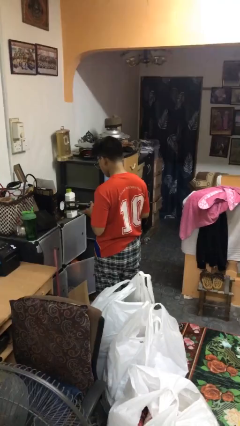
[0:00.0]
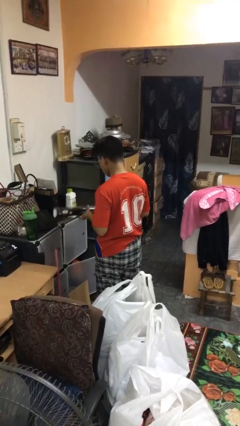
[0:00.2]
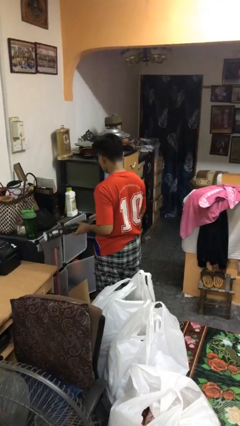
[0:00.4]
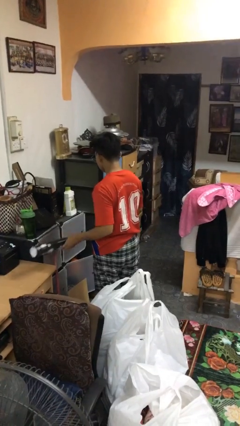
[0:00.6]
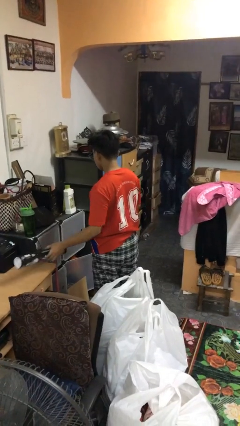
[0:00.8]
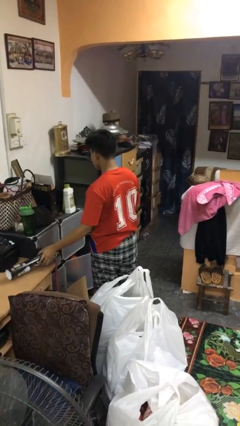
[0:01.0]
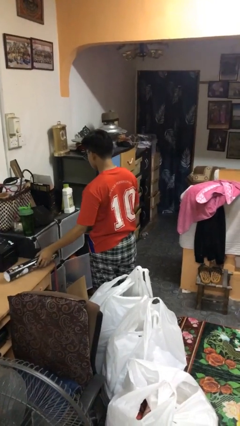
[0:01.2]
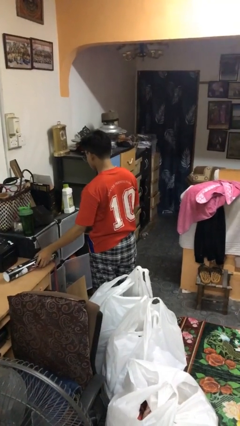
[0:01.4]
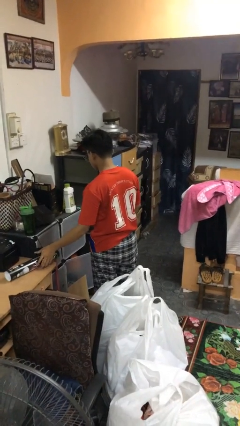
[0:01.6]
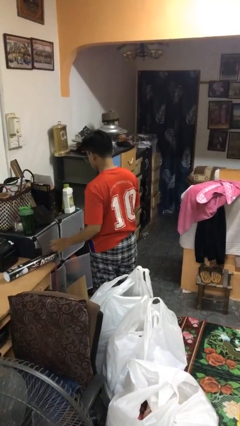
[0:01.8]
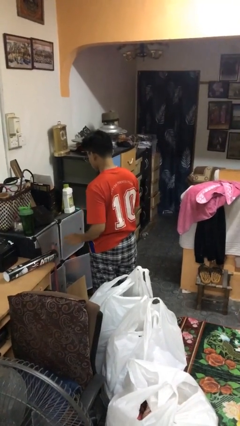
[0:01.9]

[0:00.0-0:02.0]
person puts down object on countertop

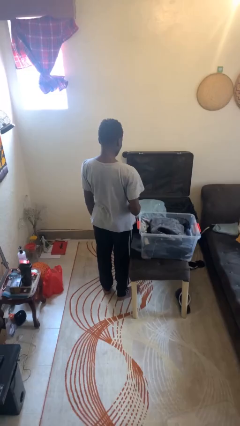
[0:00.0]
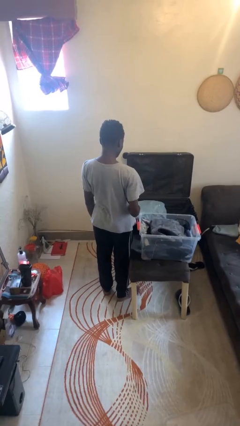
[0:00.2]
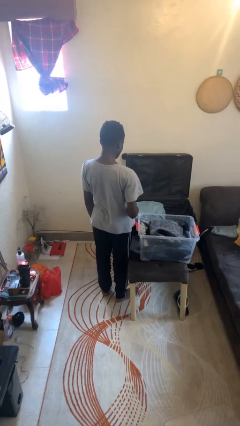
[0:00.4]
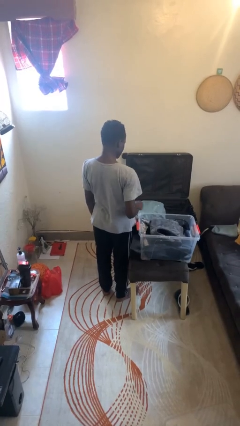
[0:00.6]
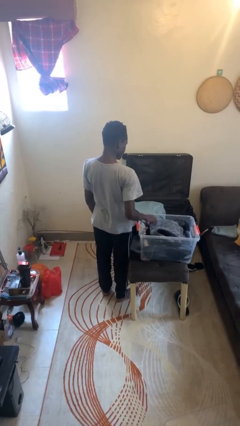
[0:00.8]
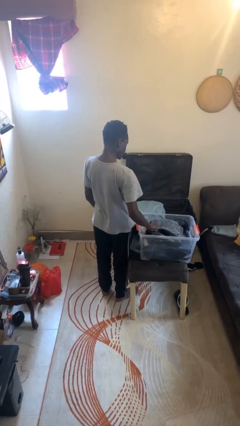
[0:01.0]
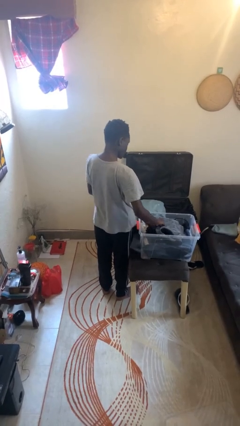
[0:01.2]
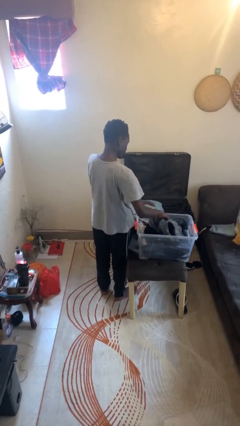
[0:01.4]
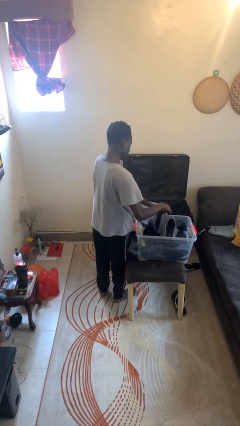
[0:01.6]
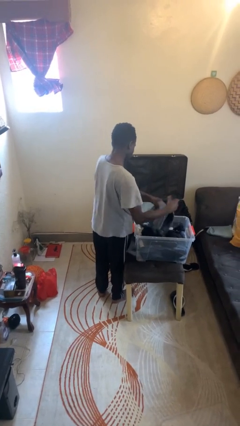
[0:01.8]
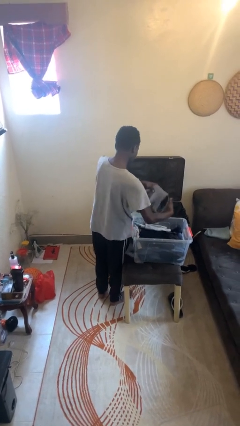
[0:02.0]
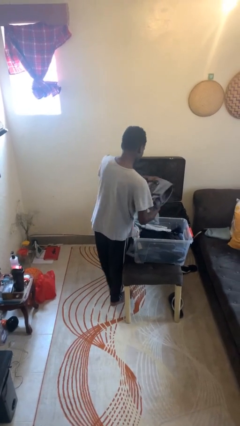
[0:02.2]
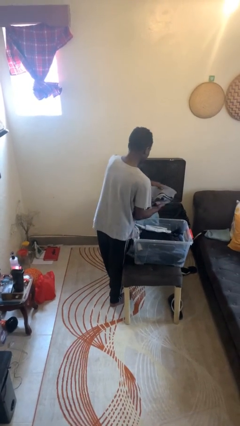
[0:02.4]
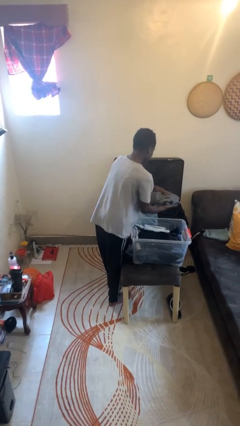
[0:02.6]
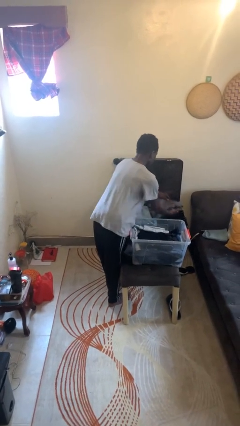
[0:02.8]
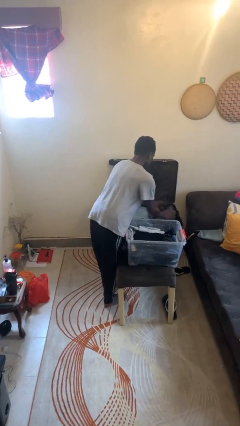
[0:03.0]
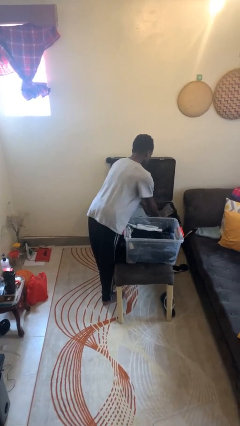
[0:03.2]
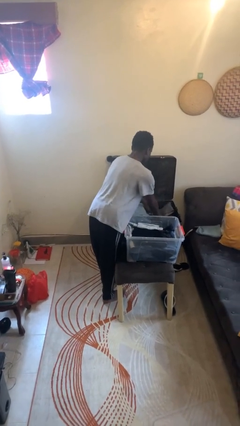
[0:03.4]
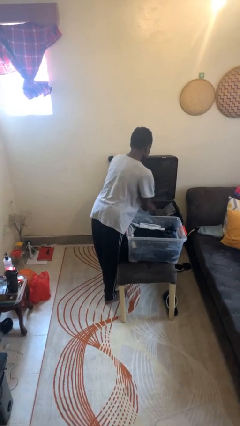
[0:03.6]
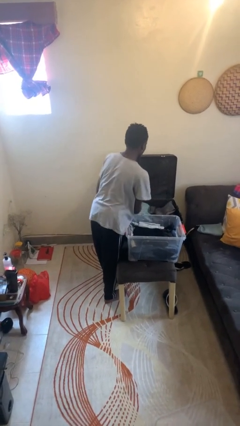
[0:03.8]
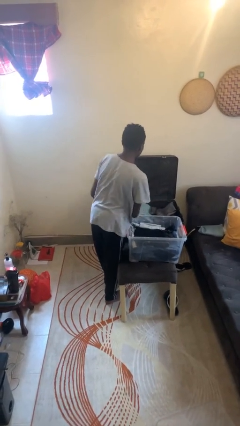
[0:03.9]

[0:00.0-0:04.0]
person loads clothes into suitcase

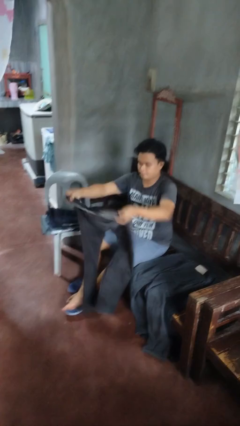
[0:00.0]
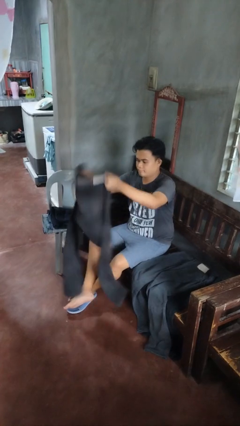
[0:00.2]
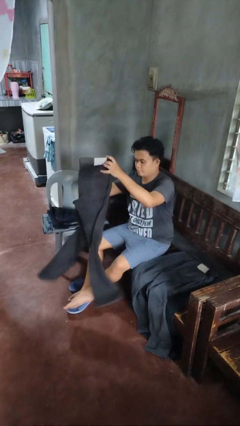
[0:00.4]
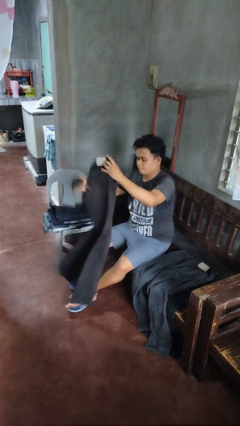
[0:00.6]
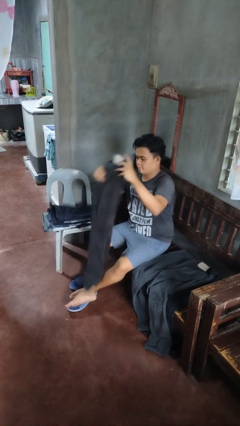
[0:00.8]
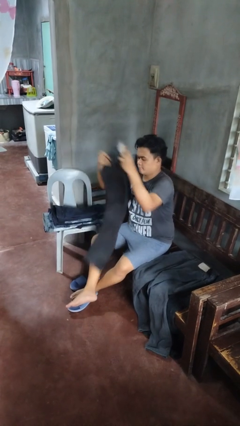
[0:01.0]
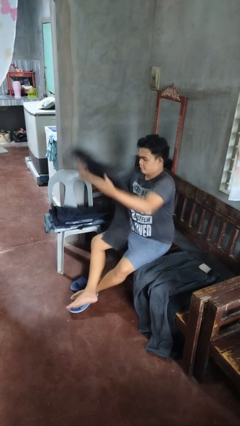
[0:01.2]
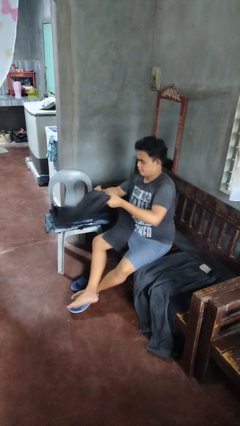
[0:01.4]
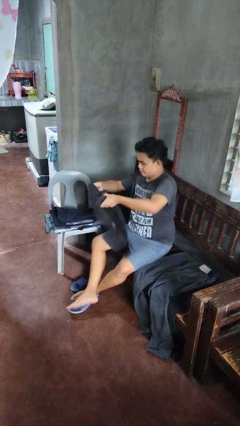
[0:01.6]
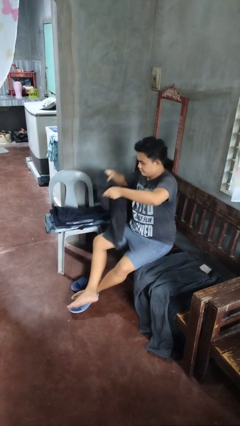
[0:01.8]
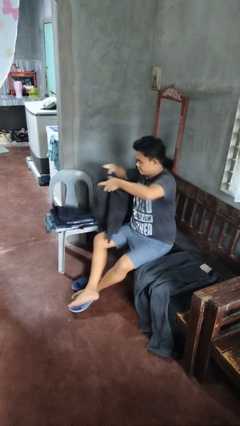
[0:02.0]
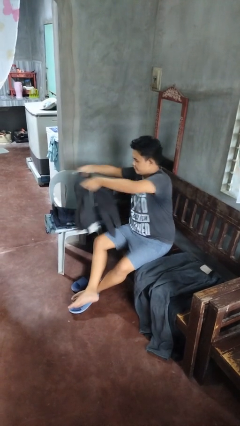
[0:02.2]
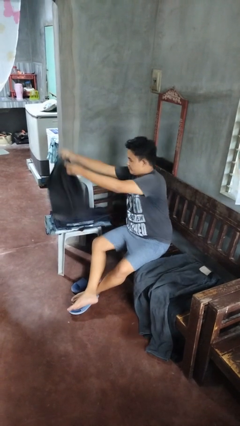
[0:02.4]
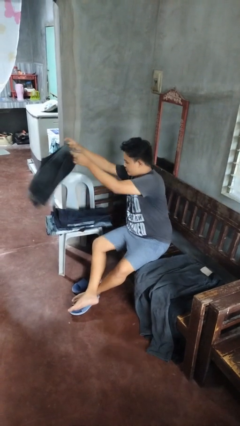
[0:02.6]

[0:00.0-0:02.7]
person folds pants

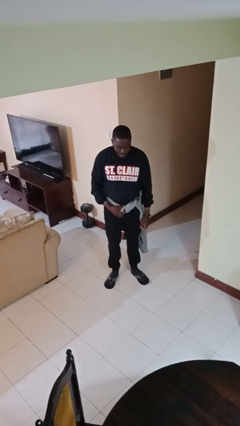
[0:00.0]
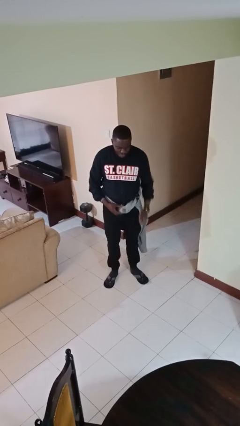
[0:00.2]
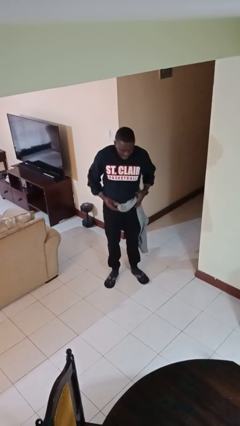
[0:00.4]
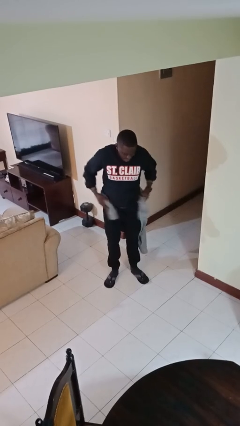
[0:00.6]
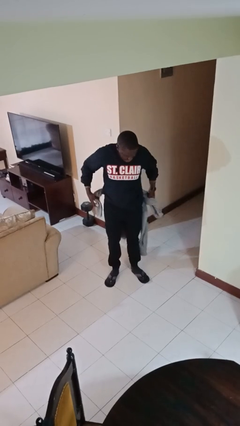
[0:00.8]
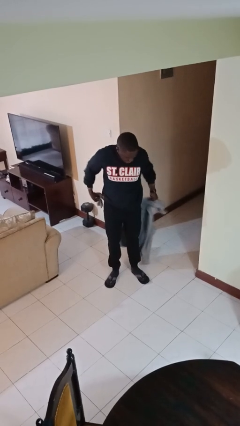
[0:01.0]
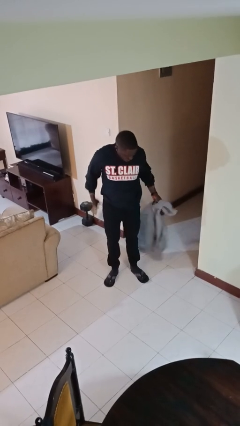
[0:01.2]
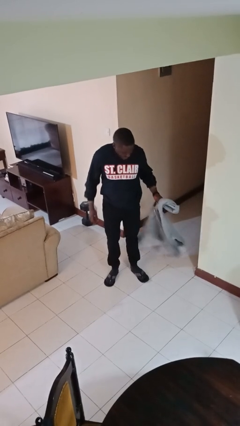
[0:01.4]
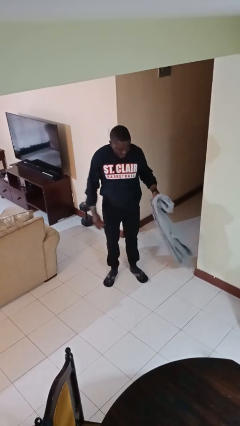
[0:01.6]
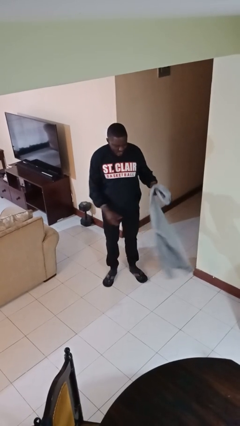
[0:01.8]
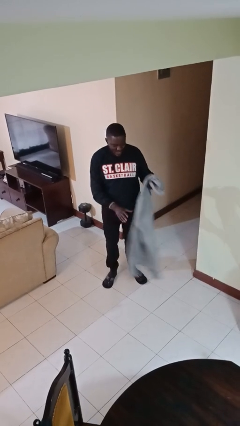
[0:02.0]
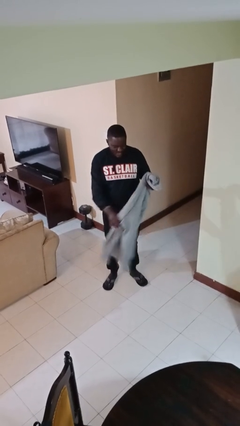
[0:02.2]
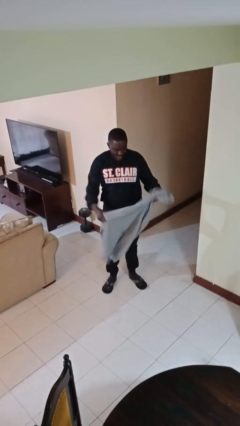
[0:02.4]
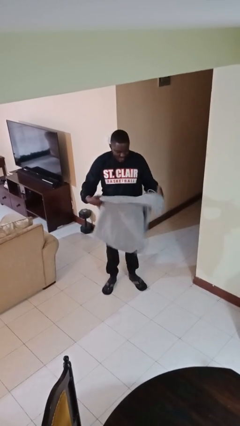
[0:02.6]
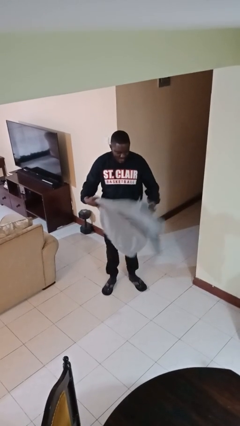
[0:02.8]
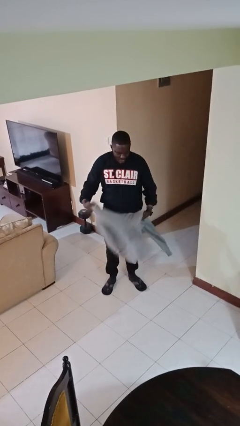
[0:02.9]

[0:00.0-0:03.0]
person unties jacket around waist

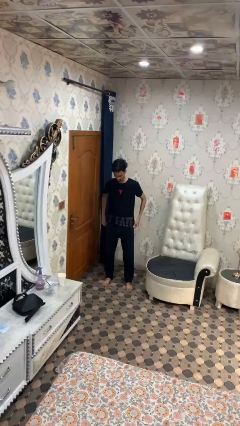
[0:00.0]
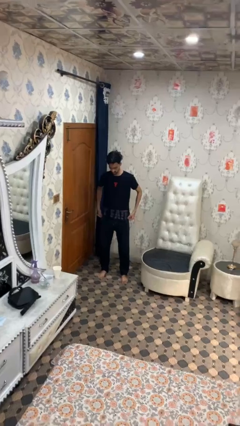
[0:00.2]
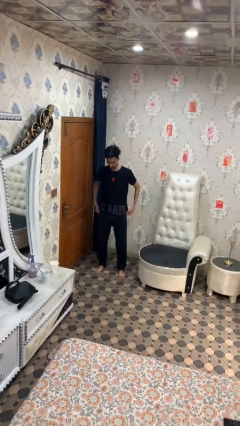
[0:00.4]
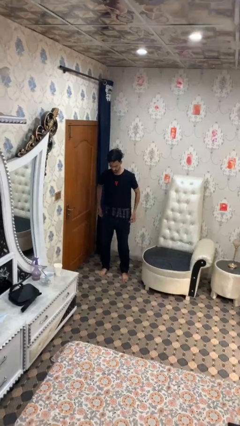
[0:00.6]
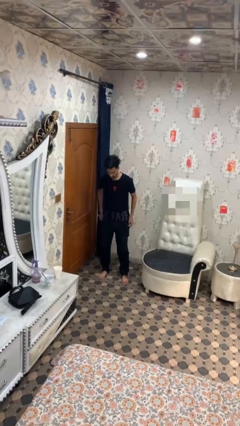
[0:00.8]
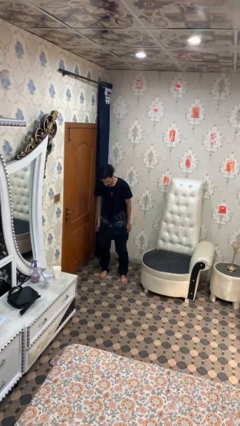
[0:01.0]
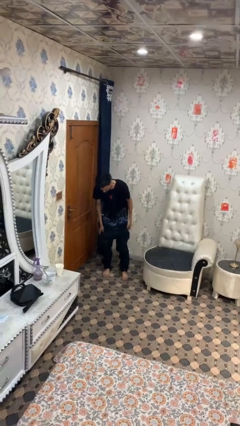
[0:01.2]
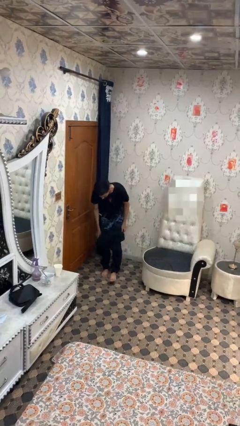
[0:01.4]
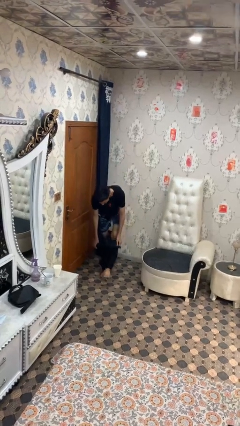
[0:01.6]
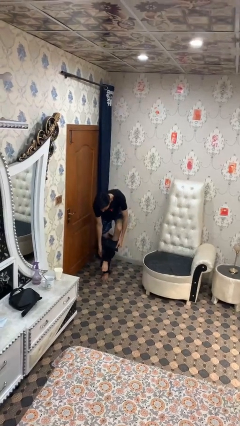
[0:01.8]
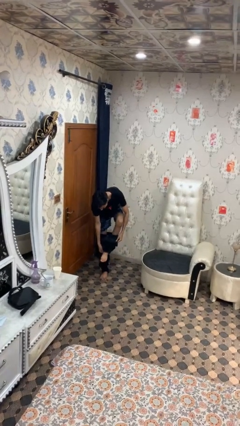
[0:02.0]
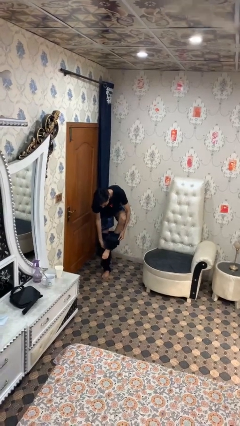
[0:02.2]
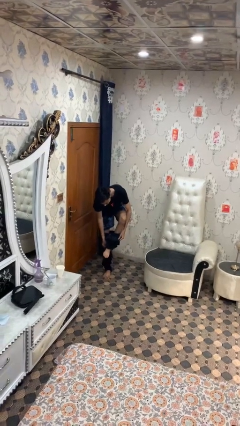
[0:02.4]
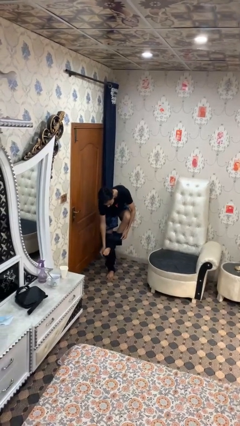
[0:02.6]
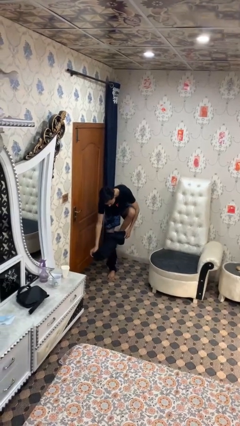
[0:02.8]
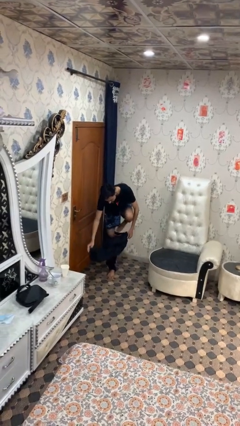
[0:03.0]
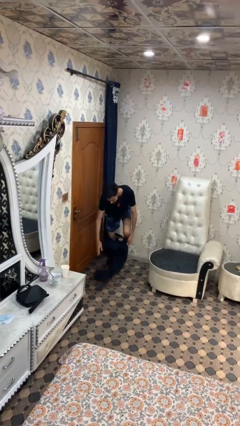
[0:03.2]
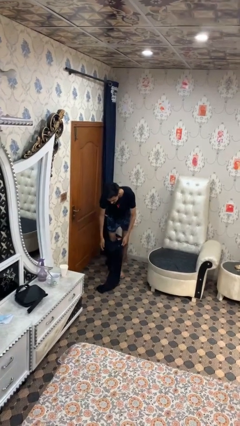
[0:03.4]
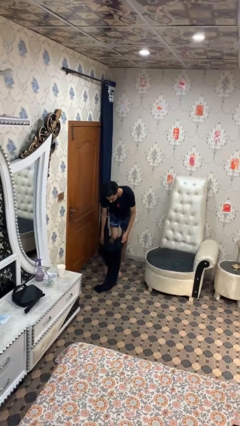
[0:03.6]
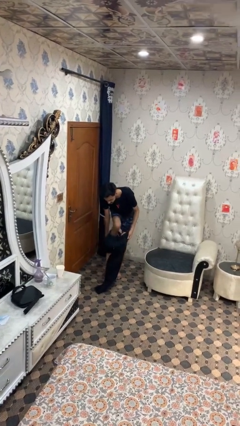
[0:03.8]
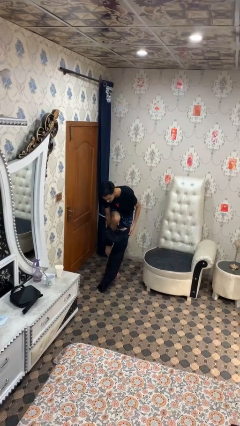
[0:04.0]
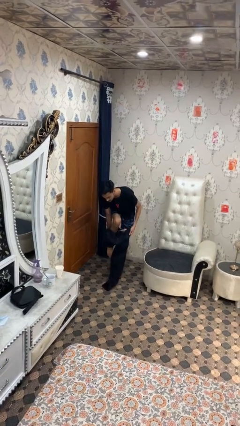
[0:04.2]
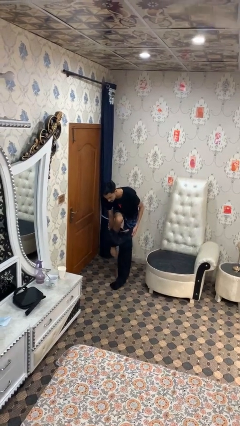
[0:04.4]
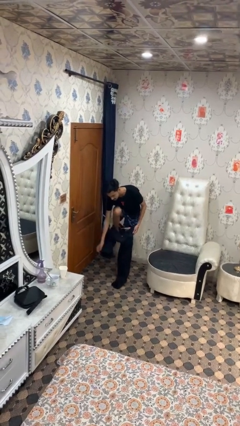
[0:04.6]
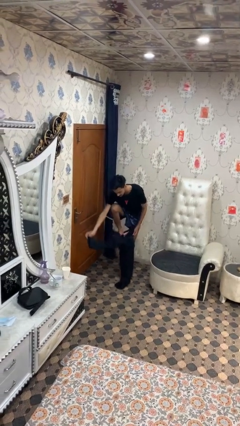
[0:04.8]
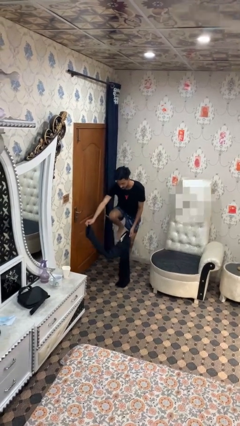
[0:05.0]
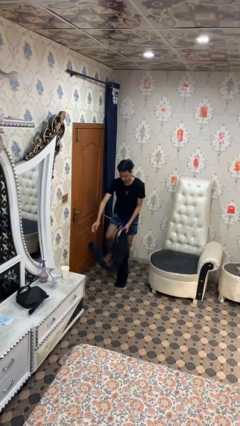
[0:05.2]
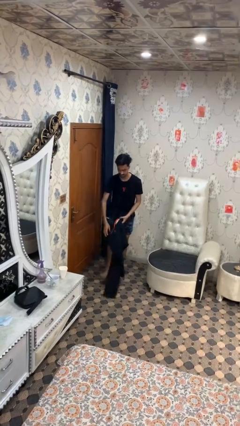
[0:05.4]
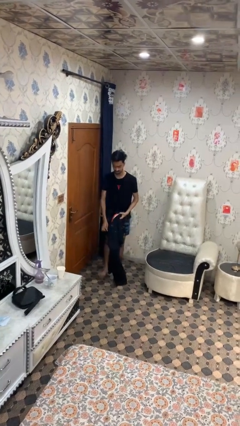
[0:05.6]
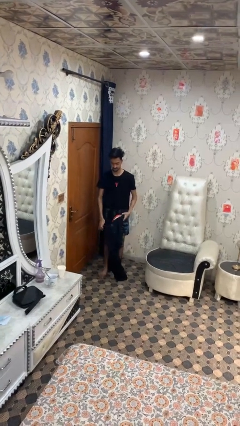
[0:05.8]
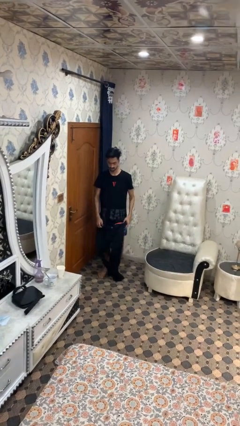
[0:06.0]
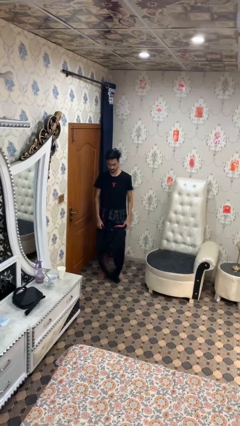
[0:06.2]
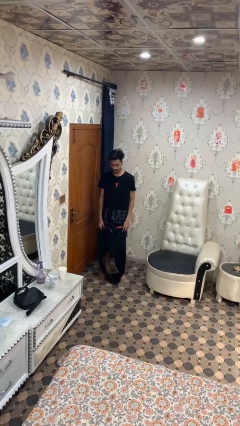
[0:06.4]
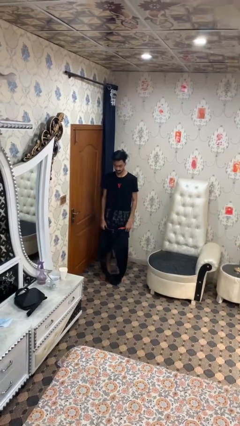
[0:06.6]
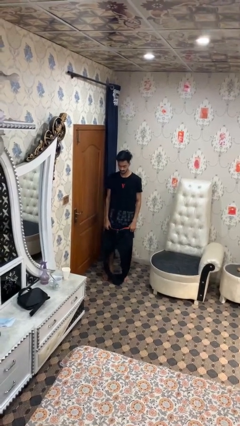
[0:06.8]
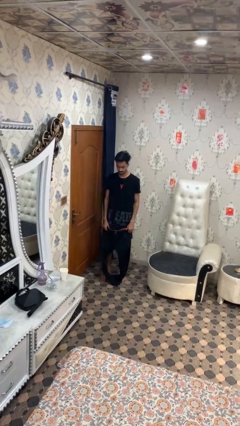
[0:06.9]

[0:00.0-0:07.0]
person takes off pants
